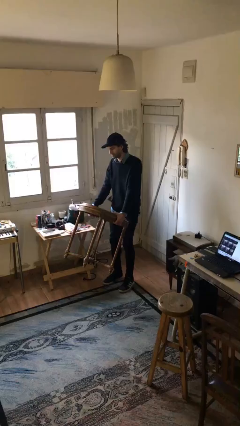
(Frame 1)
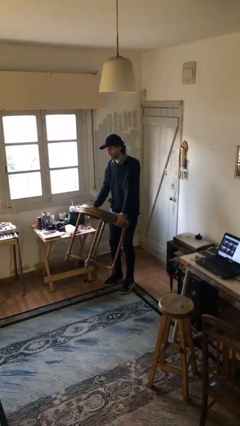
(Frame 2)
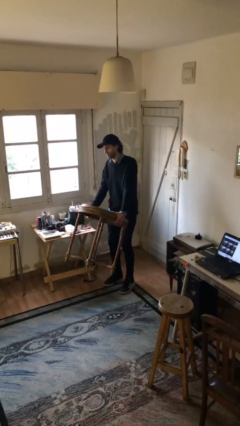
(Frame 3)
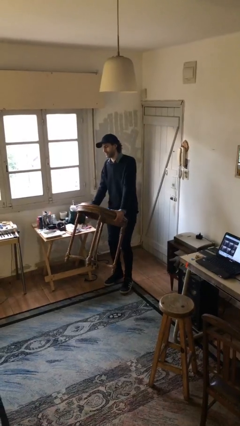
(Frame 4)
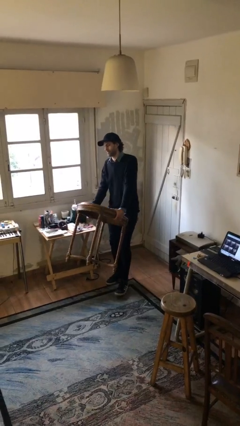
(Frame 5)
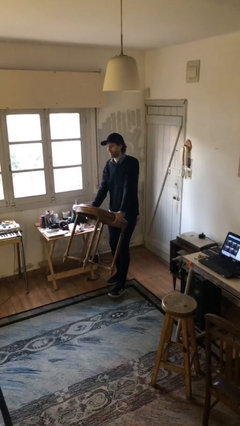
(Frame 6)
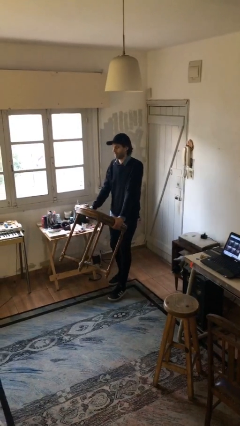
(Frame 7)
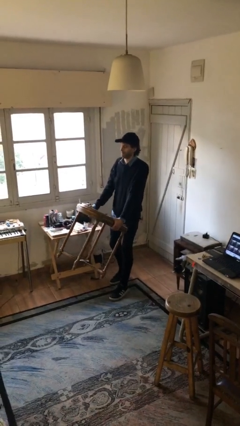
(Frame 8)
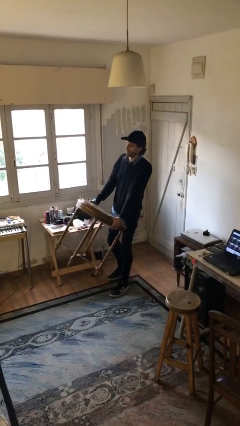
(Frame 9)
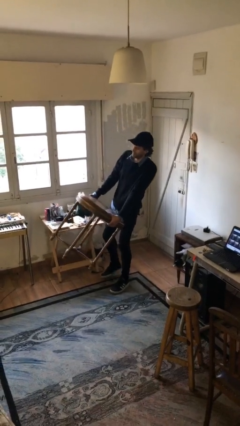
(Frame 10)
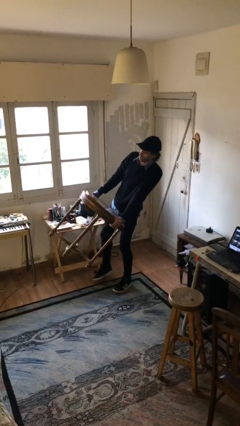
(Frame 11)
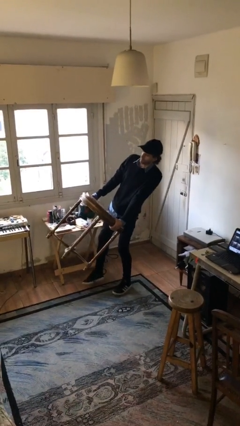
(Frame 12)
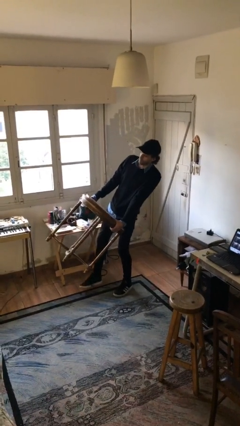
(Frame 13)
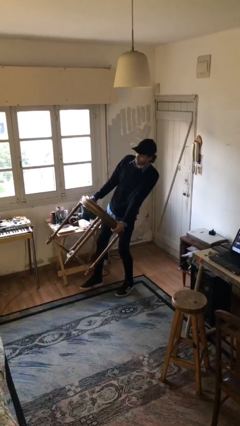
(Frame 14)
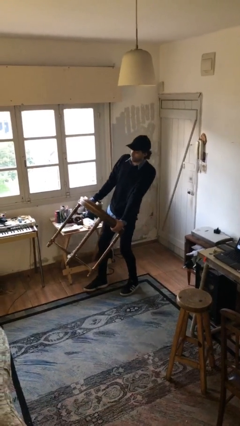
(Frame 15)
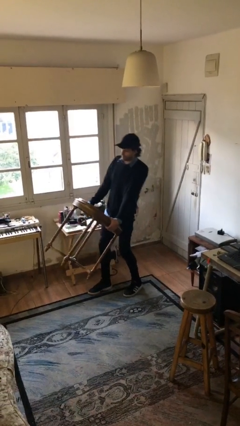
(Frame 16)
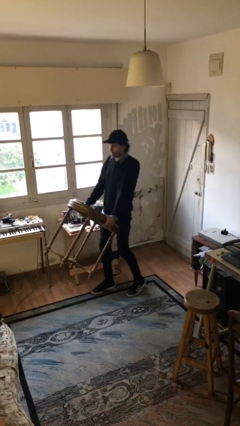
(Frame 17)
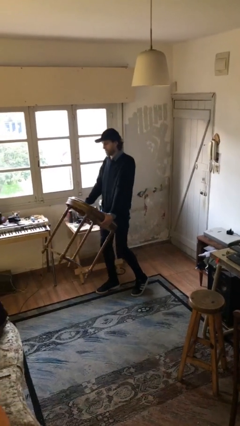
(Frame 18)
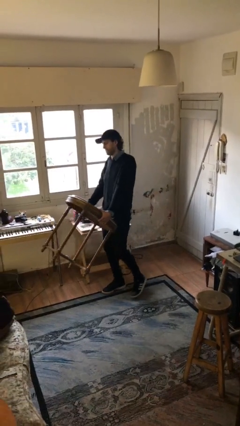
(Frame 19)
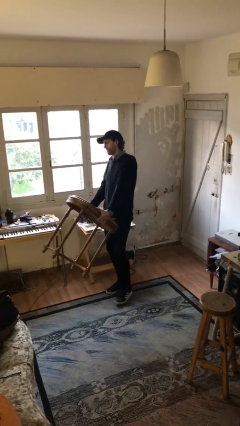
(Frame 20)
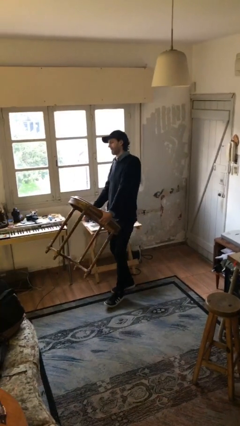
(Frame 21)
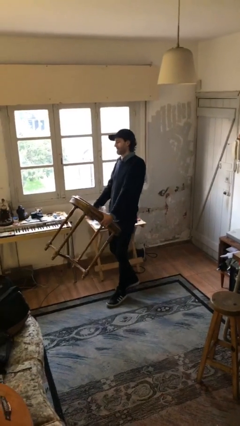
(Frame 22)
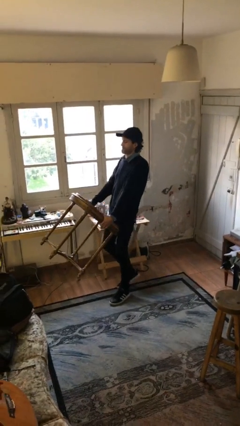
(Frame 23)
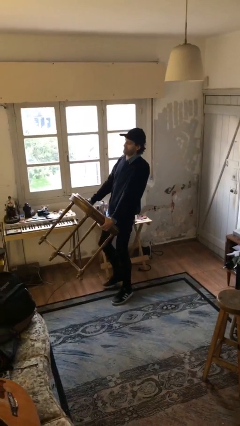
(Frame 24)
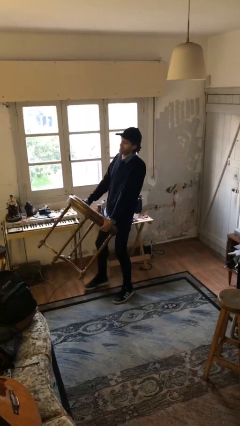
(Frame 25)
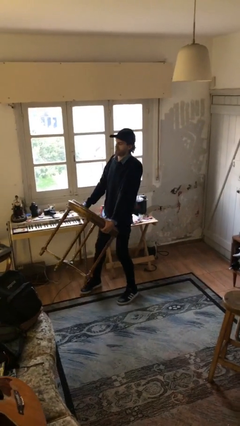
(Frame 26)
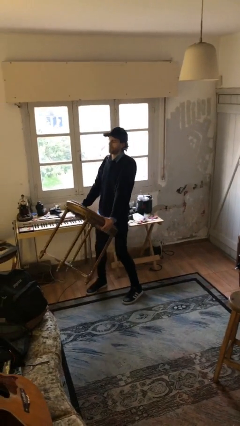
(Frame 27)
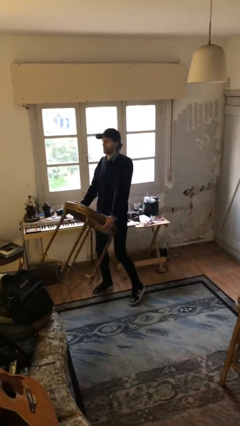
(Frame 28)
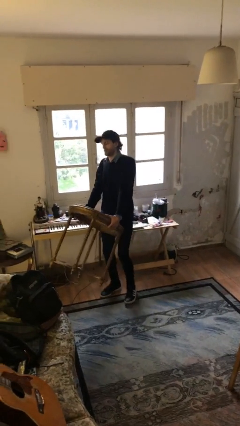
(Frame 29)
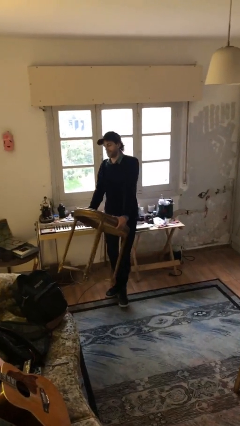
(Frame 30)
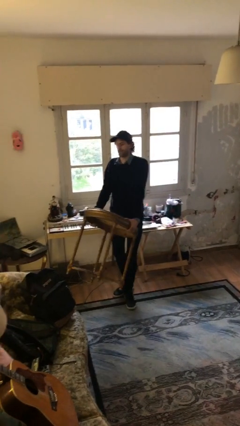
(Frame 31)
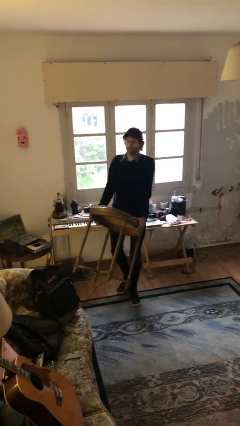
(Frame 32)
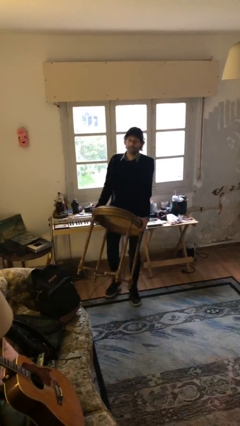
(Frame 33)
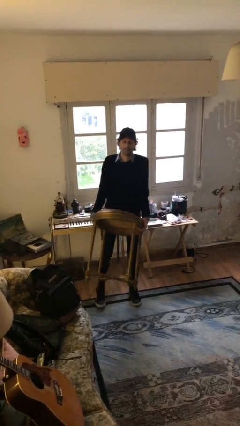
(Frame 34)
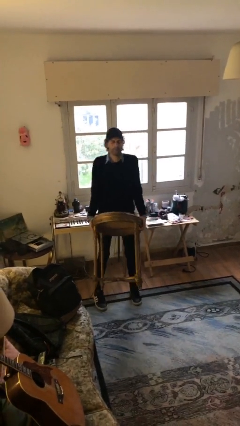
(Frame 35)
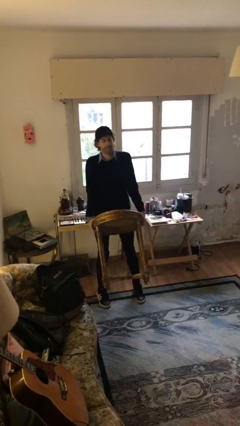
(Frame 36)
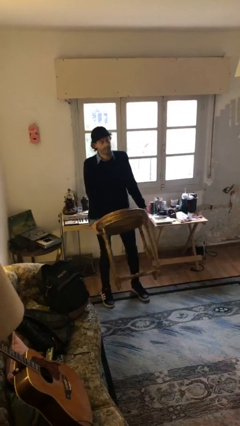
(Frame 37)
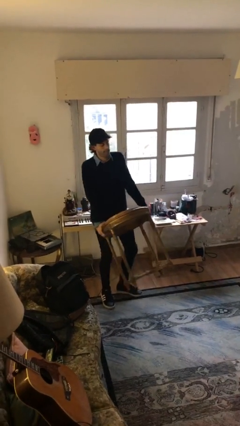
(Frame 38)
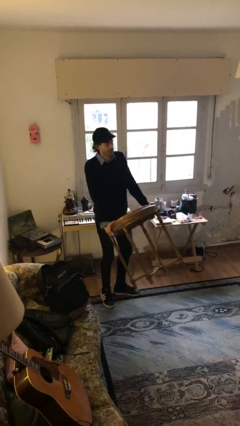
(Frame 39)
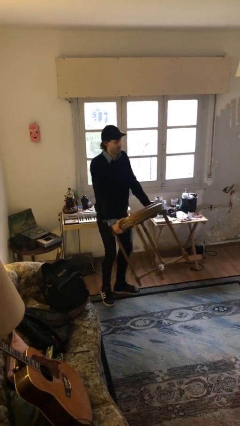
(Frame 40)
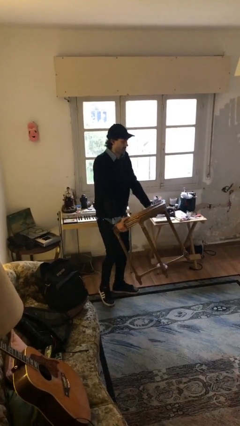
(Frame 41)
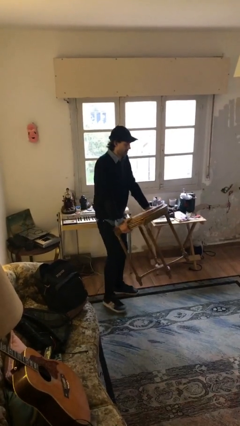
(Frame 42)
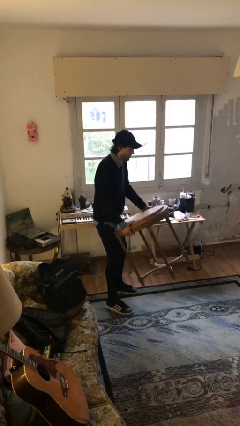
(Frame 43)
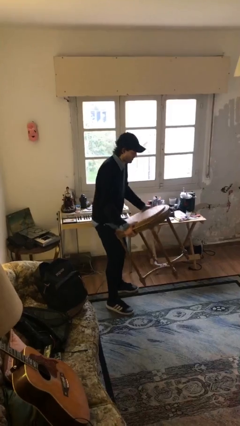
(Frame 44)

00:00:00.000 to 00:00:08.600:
person carries heavy object

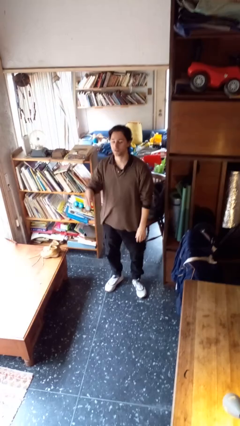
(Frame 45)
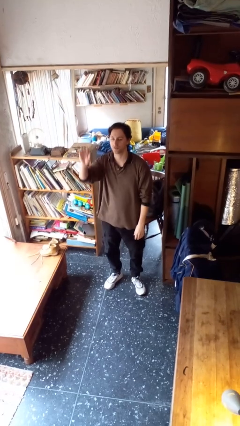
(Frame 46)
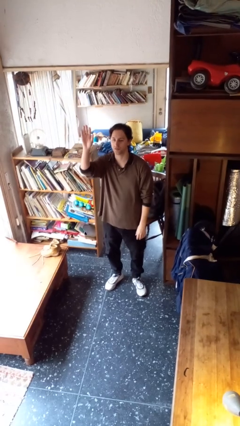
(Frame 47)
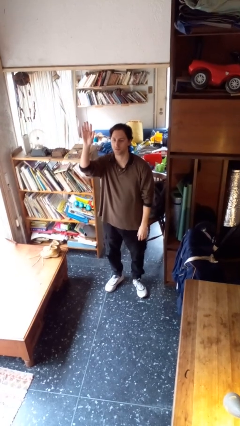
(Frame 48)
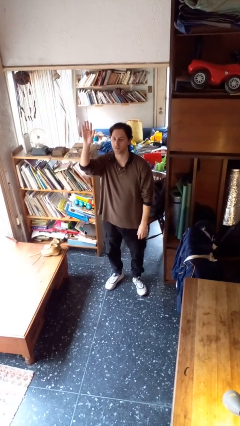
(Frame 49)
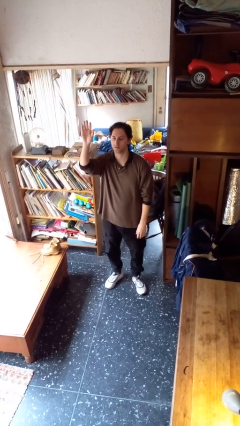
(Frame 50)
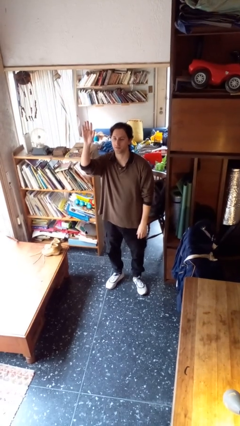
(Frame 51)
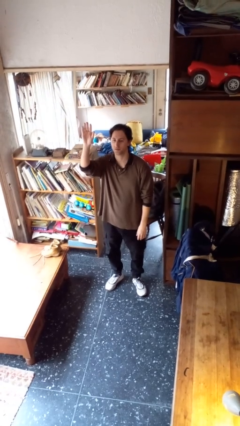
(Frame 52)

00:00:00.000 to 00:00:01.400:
person gestures raise hand

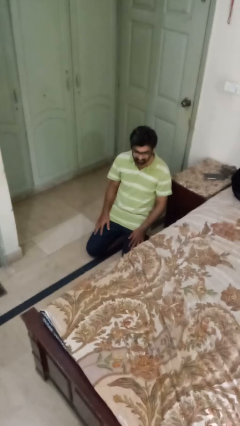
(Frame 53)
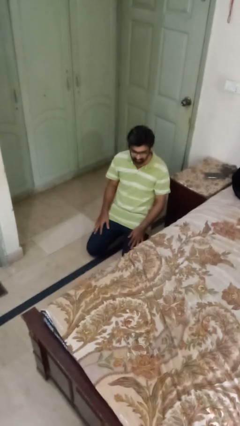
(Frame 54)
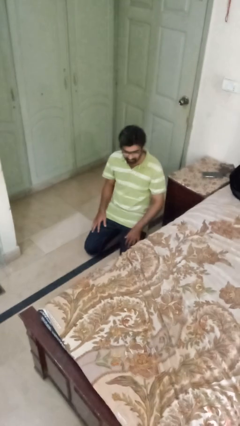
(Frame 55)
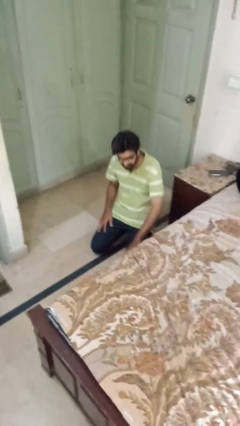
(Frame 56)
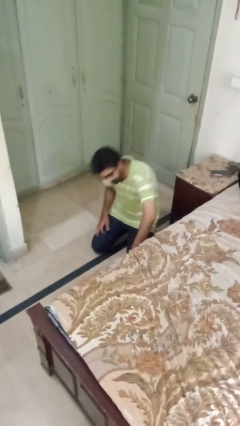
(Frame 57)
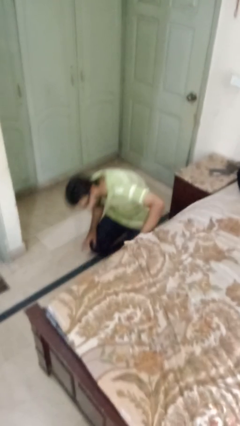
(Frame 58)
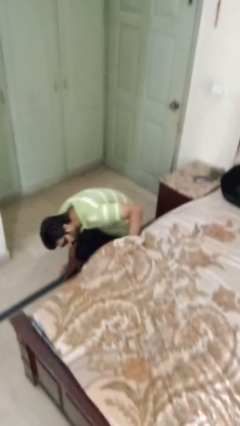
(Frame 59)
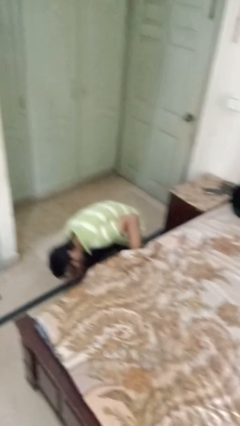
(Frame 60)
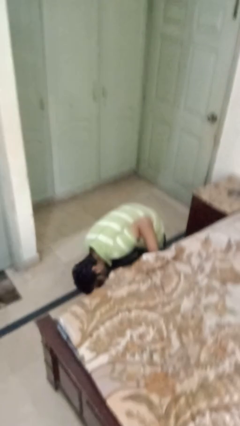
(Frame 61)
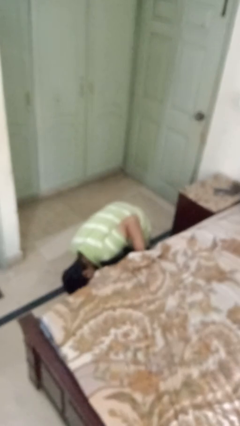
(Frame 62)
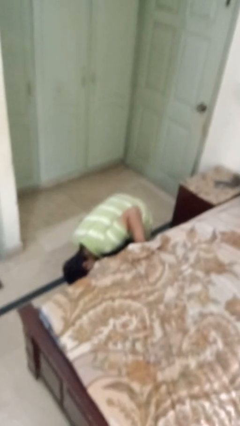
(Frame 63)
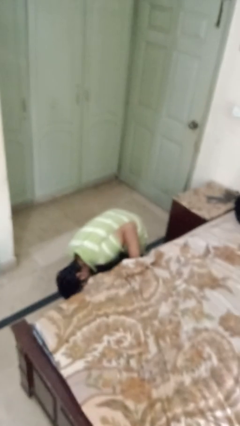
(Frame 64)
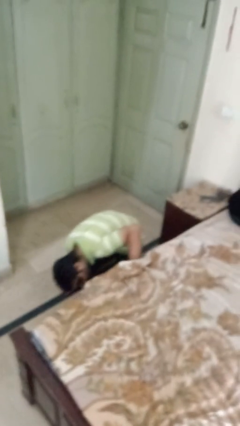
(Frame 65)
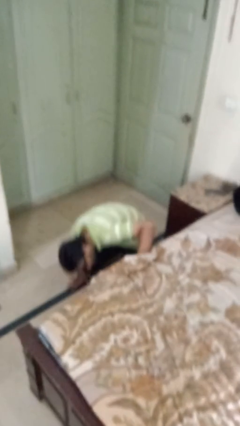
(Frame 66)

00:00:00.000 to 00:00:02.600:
person searches under bed

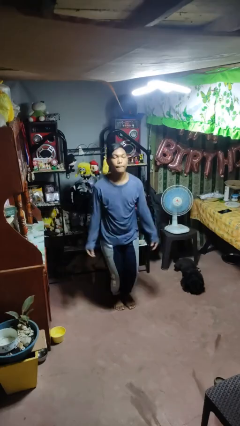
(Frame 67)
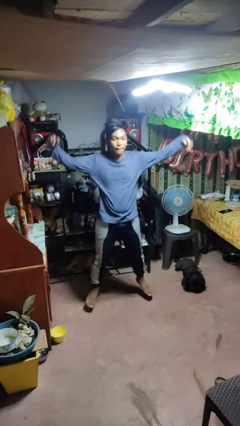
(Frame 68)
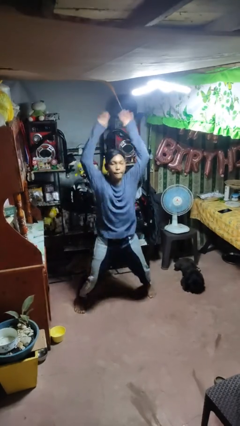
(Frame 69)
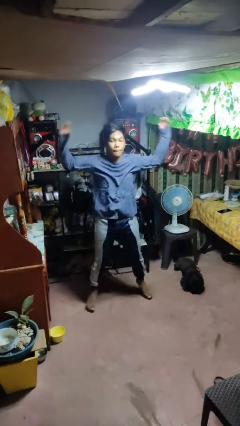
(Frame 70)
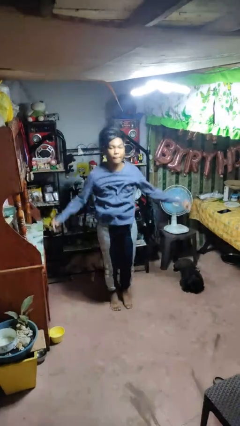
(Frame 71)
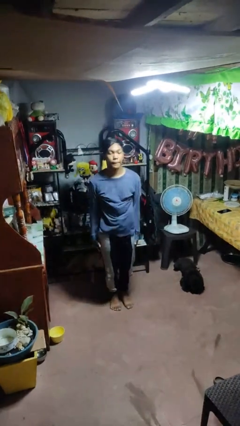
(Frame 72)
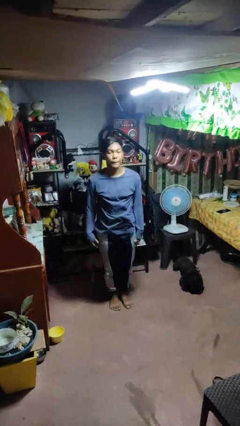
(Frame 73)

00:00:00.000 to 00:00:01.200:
person exercises with jumping jacks

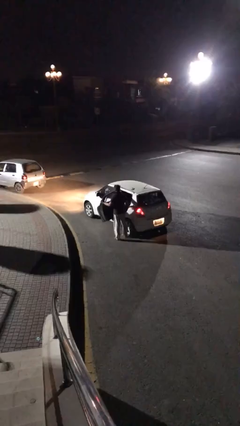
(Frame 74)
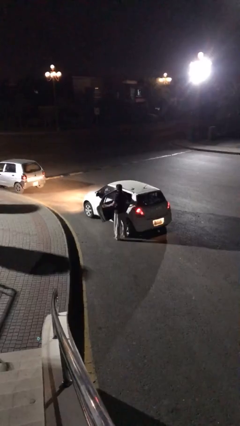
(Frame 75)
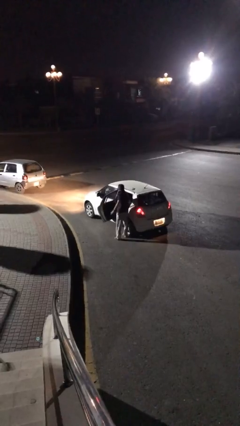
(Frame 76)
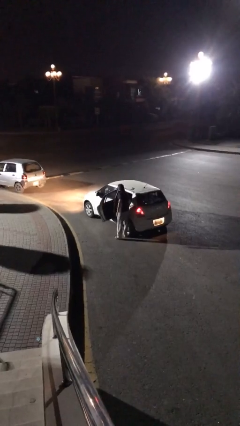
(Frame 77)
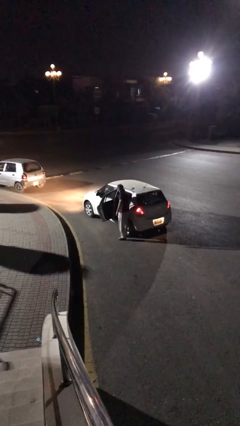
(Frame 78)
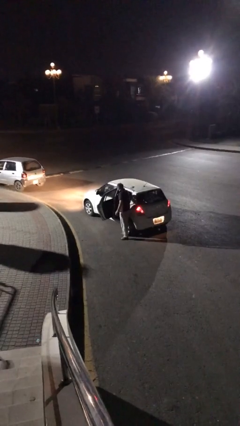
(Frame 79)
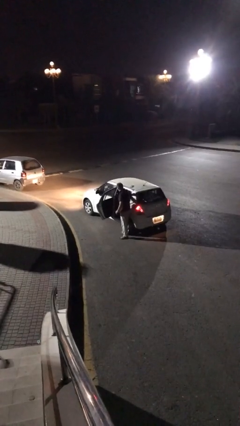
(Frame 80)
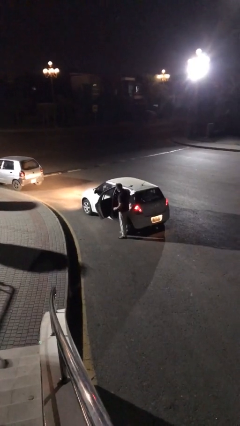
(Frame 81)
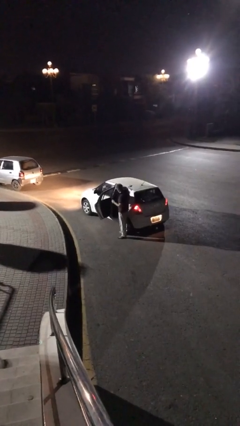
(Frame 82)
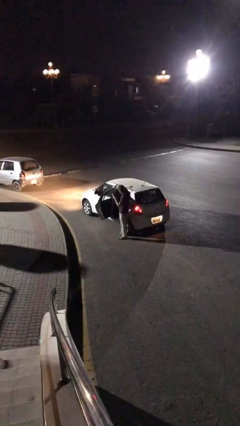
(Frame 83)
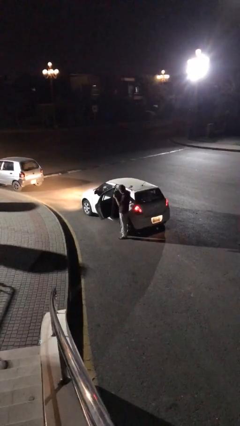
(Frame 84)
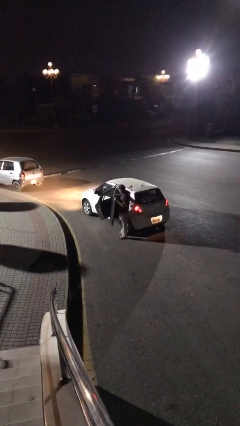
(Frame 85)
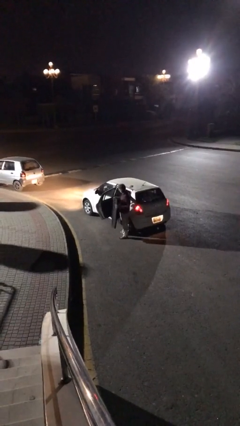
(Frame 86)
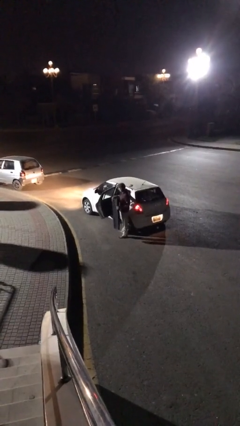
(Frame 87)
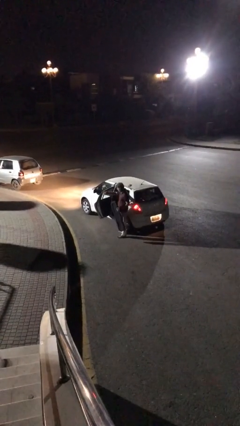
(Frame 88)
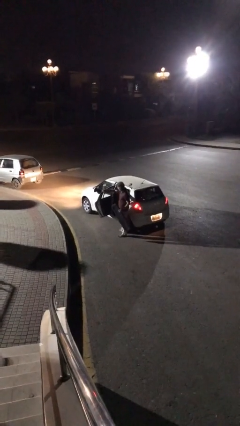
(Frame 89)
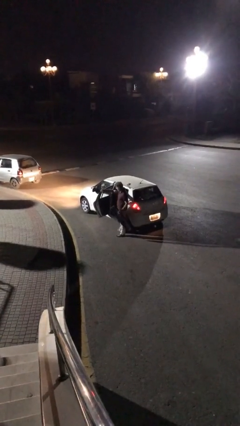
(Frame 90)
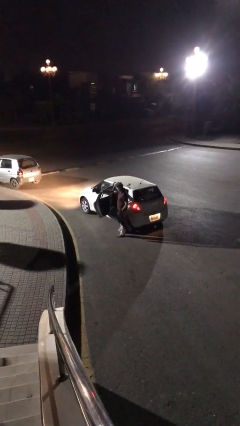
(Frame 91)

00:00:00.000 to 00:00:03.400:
person unloads car

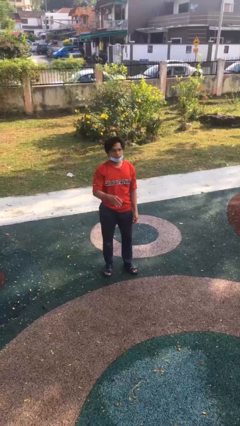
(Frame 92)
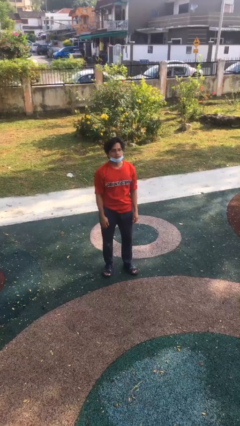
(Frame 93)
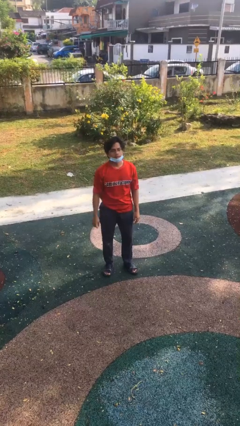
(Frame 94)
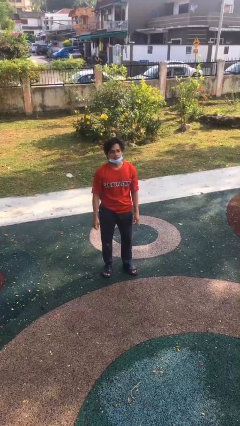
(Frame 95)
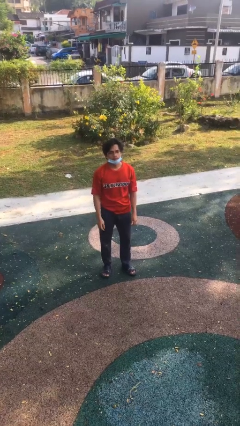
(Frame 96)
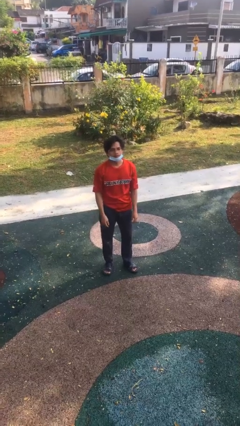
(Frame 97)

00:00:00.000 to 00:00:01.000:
person gestures lower hand
